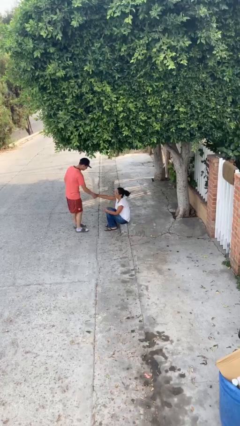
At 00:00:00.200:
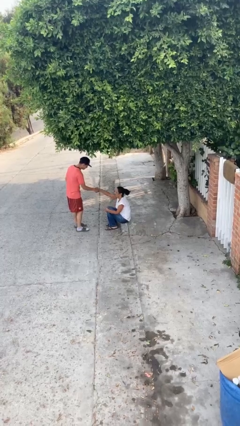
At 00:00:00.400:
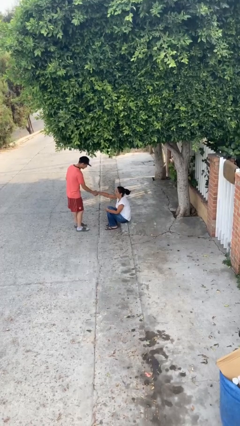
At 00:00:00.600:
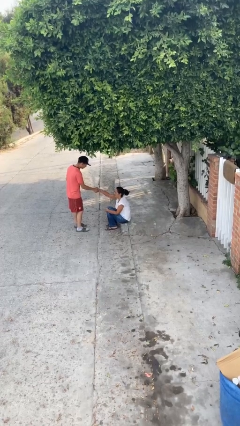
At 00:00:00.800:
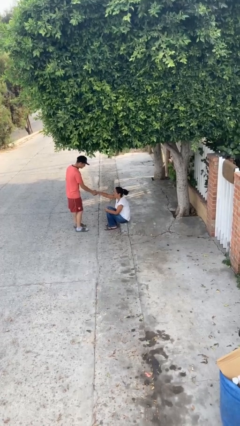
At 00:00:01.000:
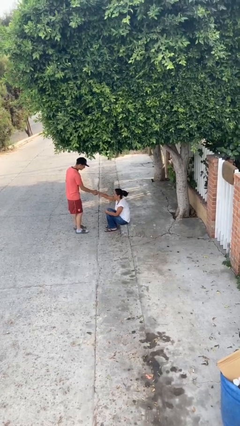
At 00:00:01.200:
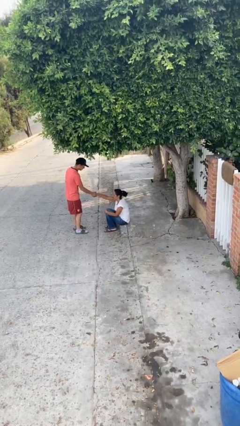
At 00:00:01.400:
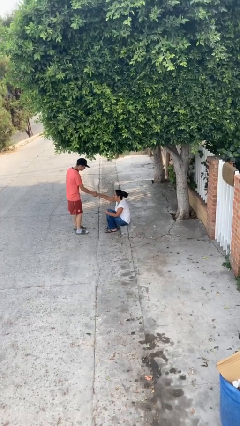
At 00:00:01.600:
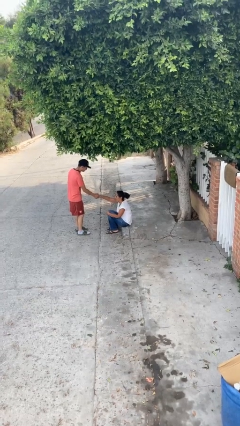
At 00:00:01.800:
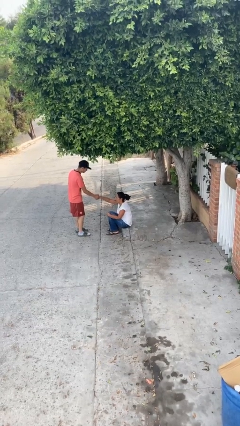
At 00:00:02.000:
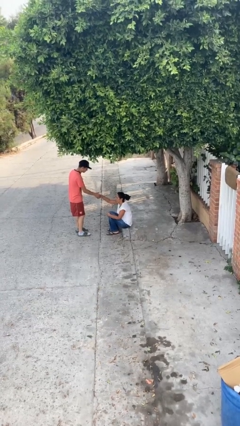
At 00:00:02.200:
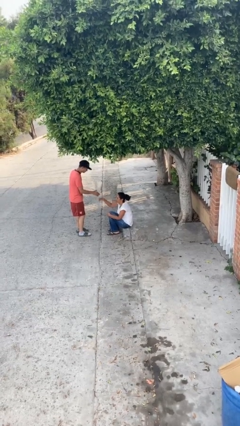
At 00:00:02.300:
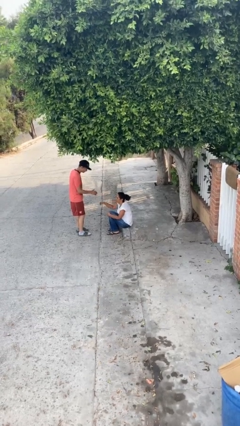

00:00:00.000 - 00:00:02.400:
person shakes hand

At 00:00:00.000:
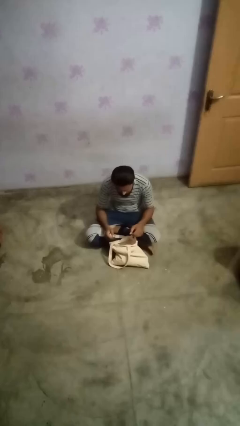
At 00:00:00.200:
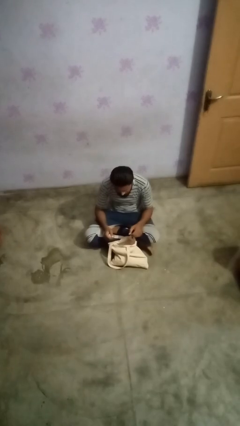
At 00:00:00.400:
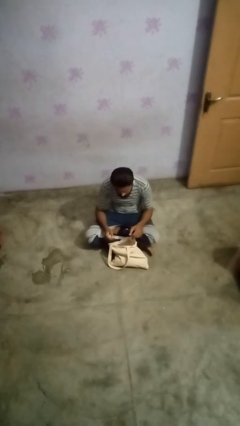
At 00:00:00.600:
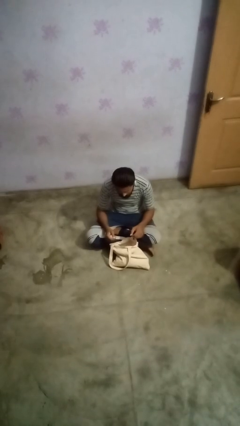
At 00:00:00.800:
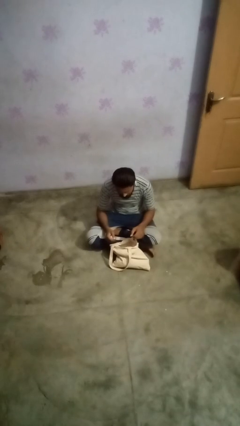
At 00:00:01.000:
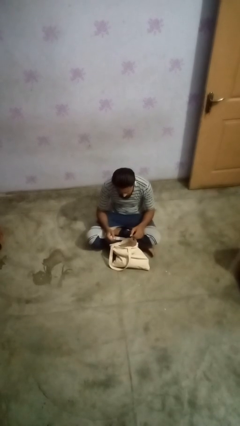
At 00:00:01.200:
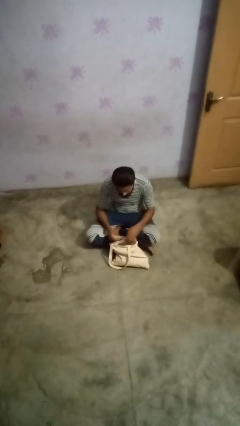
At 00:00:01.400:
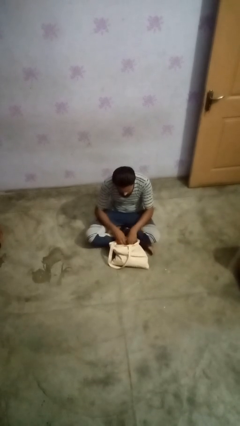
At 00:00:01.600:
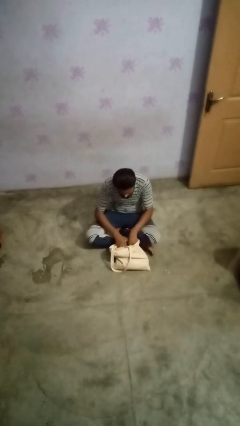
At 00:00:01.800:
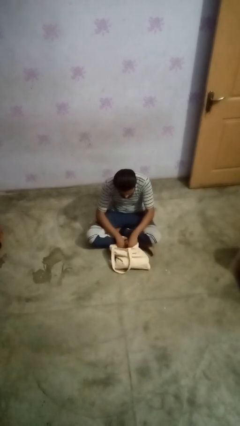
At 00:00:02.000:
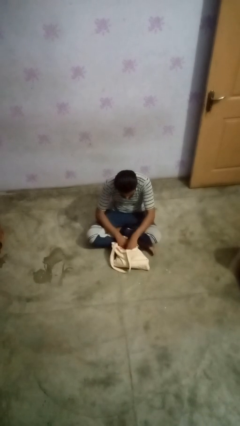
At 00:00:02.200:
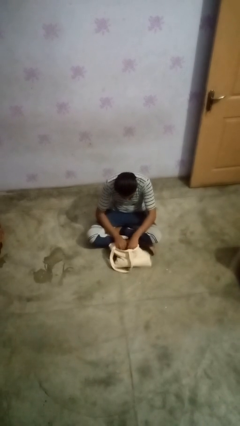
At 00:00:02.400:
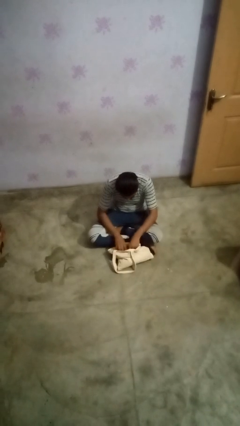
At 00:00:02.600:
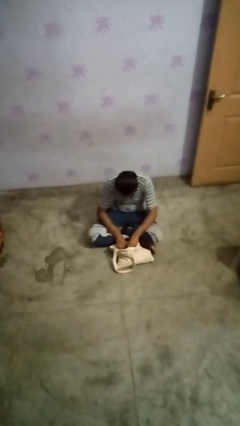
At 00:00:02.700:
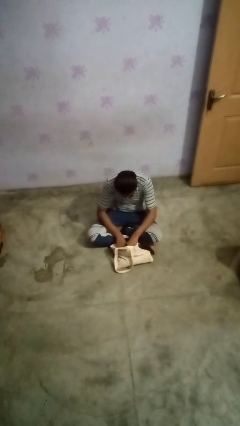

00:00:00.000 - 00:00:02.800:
person searches in bag

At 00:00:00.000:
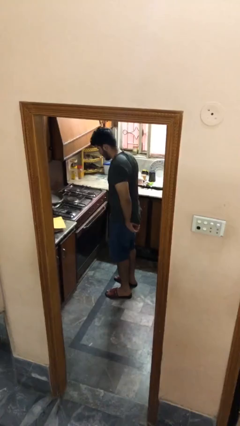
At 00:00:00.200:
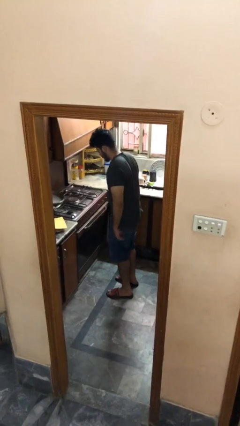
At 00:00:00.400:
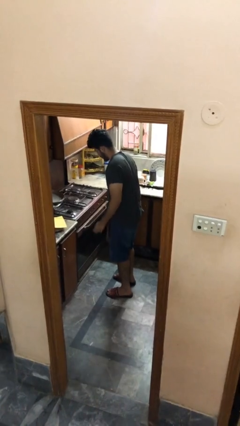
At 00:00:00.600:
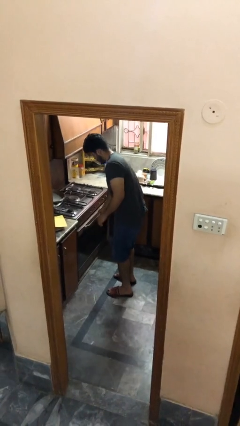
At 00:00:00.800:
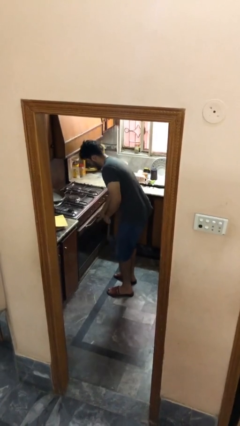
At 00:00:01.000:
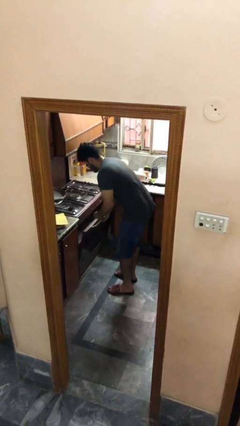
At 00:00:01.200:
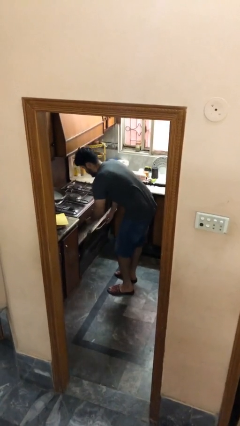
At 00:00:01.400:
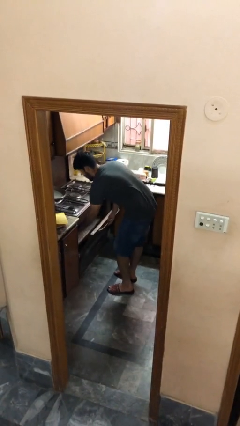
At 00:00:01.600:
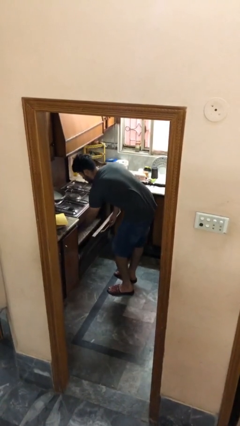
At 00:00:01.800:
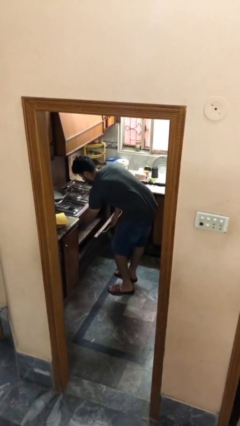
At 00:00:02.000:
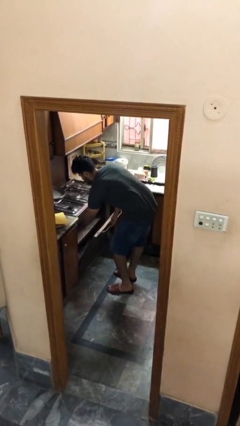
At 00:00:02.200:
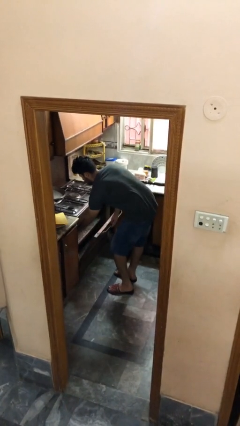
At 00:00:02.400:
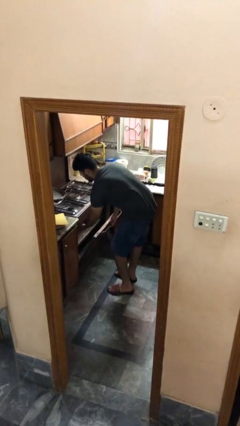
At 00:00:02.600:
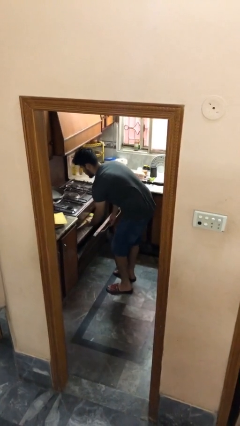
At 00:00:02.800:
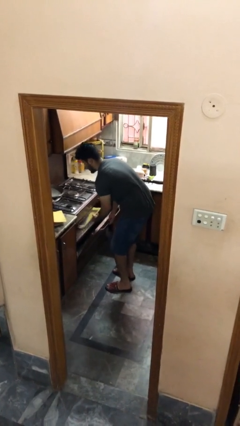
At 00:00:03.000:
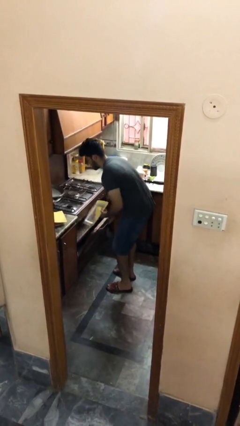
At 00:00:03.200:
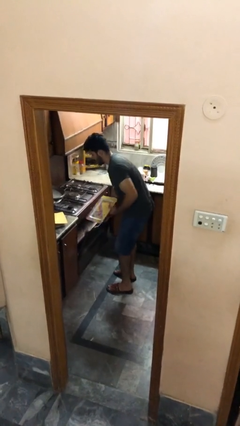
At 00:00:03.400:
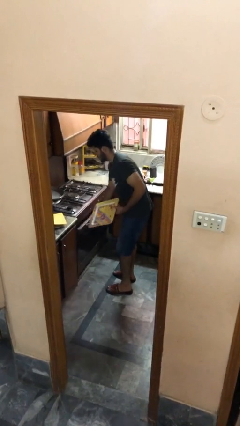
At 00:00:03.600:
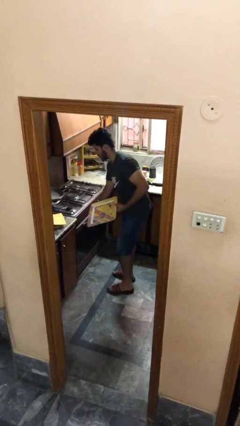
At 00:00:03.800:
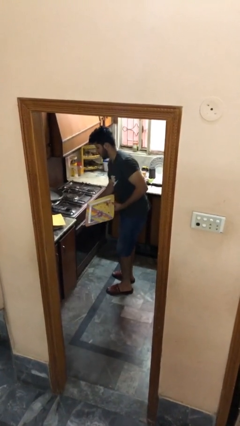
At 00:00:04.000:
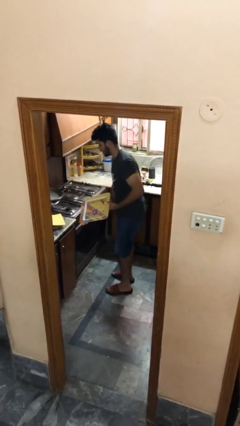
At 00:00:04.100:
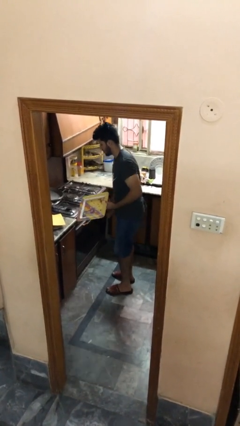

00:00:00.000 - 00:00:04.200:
person takes object from oven

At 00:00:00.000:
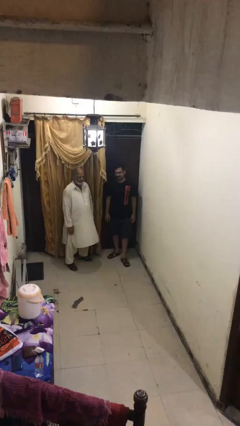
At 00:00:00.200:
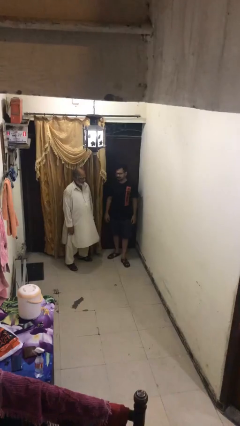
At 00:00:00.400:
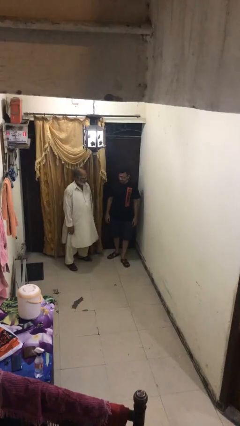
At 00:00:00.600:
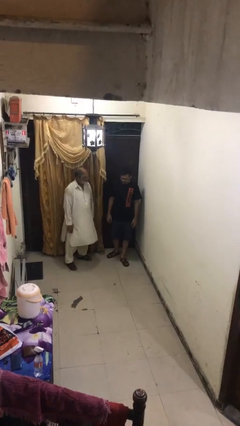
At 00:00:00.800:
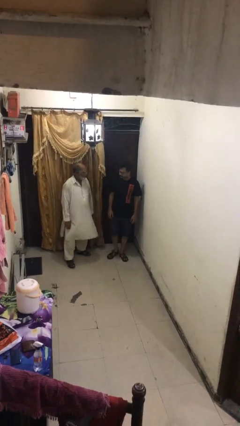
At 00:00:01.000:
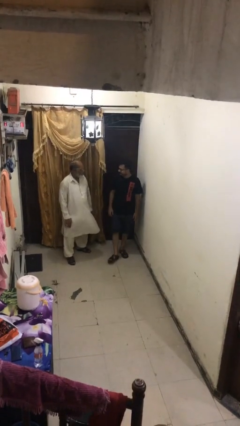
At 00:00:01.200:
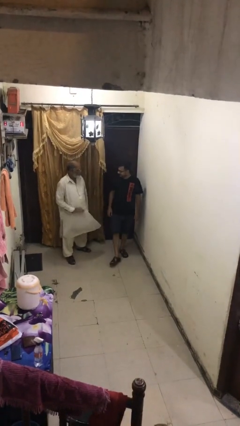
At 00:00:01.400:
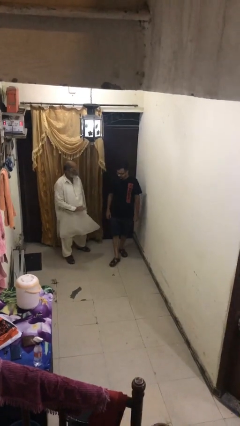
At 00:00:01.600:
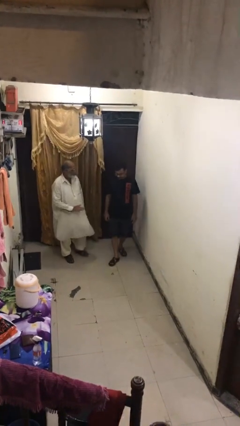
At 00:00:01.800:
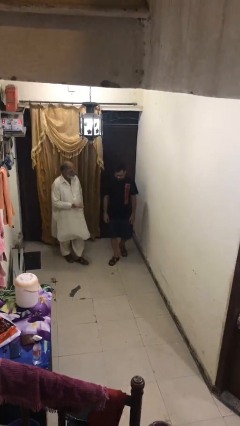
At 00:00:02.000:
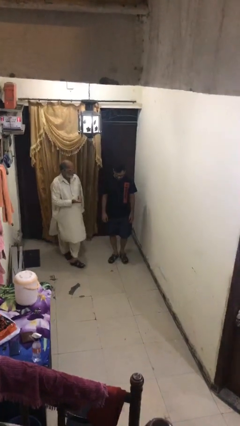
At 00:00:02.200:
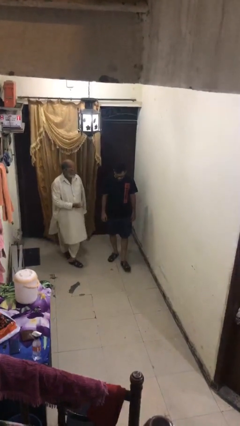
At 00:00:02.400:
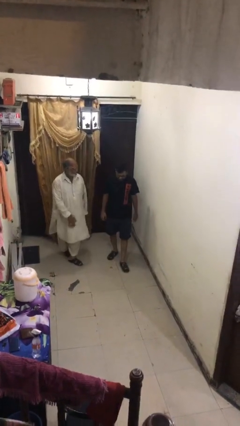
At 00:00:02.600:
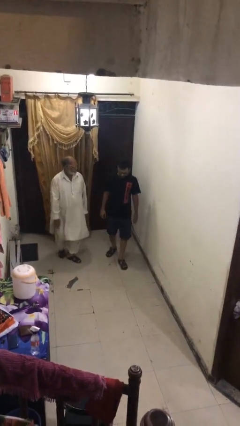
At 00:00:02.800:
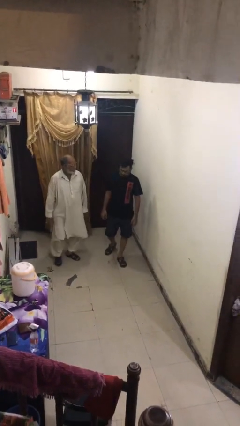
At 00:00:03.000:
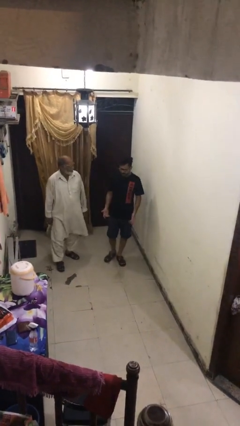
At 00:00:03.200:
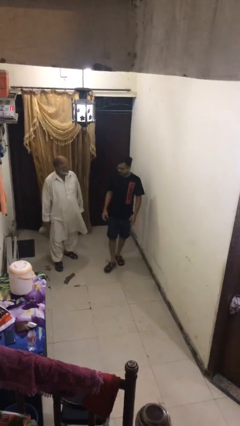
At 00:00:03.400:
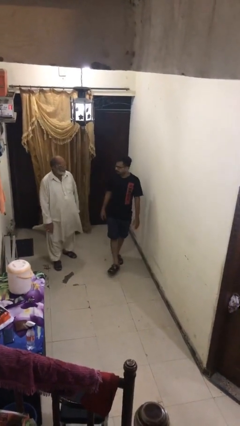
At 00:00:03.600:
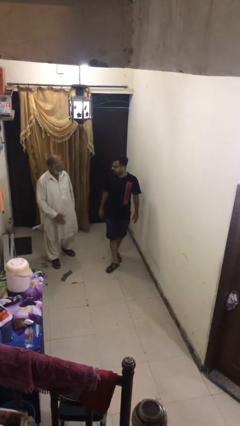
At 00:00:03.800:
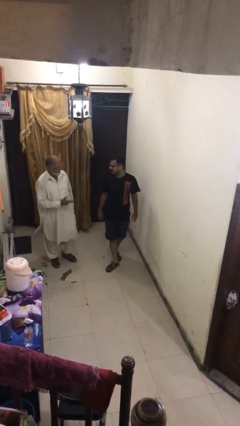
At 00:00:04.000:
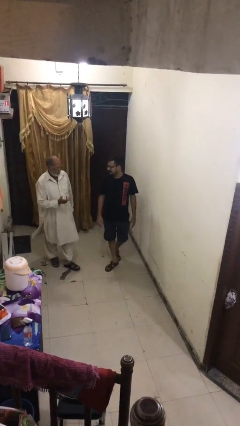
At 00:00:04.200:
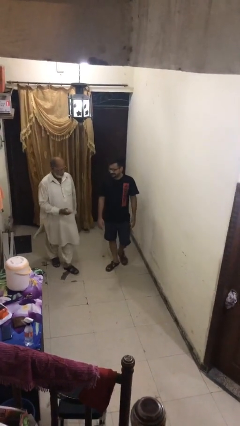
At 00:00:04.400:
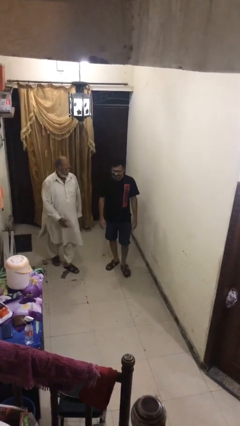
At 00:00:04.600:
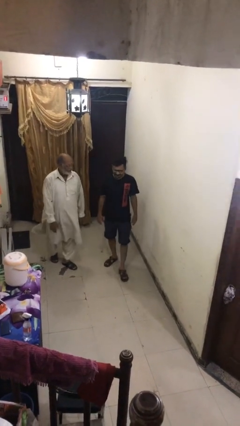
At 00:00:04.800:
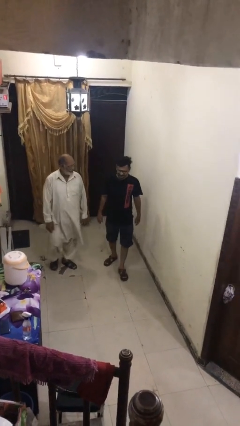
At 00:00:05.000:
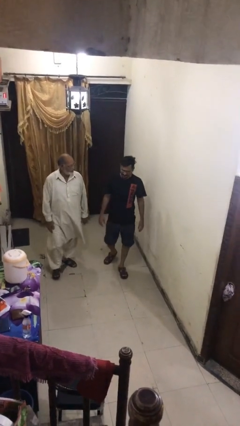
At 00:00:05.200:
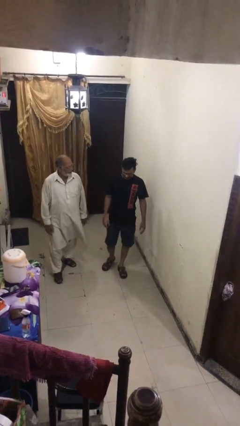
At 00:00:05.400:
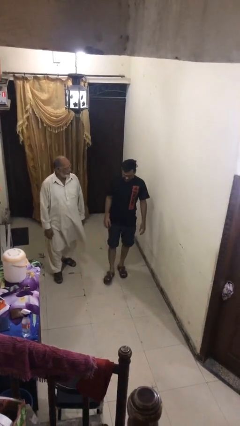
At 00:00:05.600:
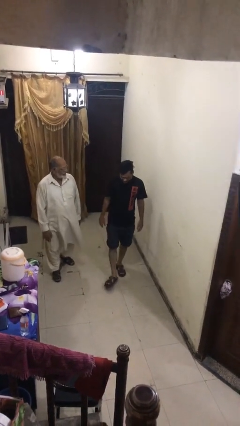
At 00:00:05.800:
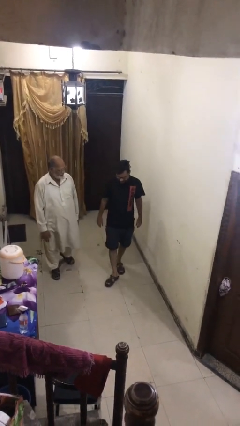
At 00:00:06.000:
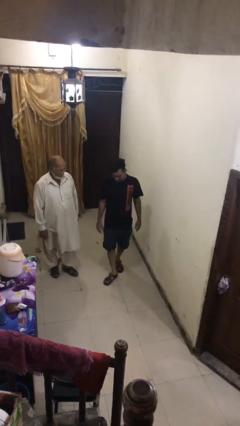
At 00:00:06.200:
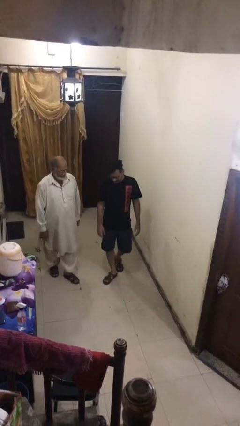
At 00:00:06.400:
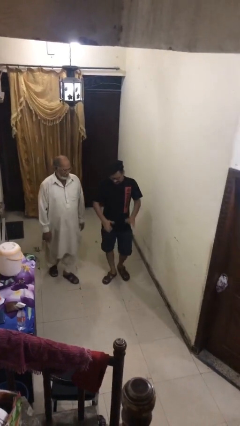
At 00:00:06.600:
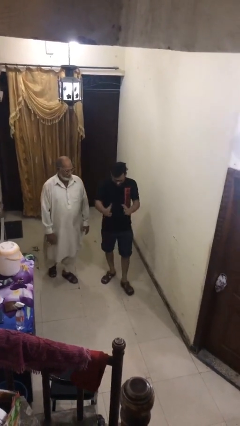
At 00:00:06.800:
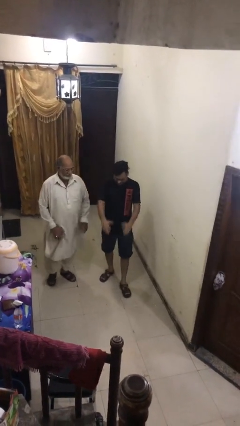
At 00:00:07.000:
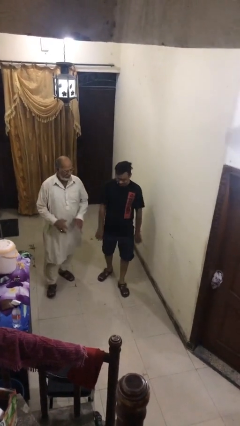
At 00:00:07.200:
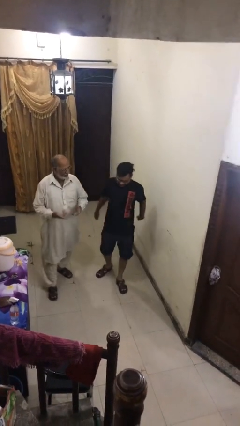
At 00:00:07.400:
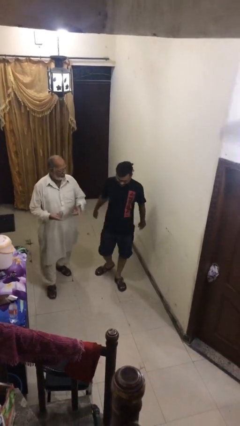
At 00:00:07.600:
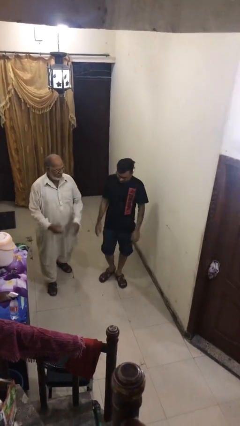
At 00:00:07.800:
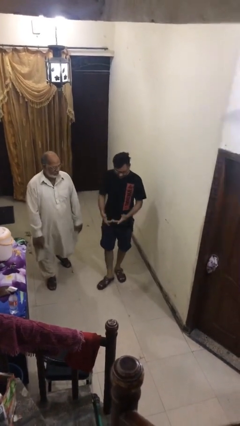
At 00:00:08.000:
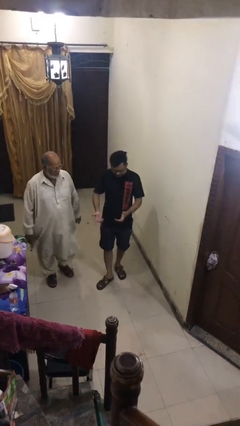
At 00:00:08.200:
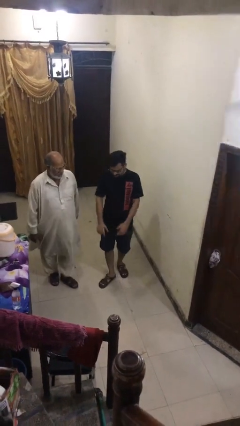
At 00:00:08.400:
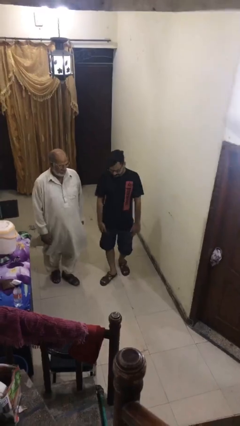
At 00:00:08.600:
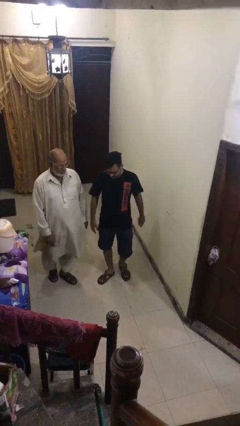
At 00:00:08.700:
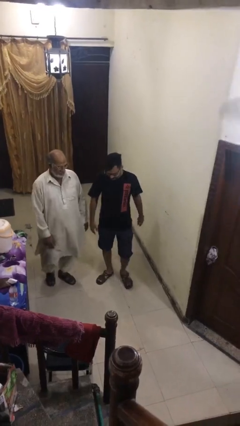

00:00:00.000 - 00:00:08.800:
person talks to person
